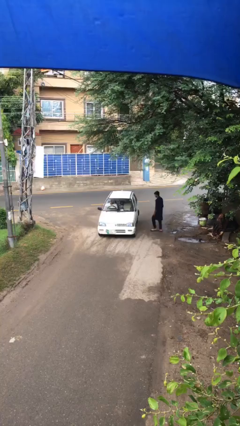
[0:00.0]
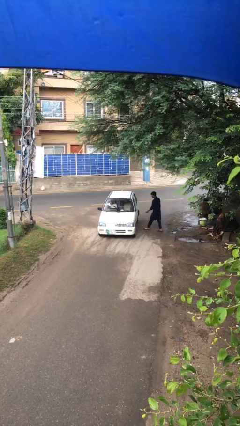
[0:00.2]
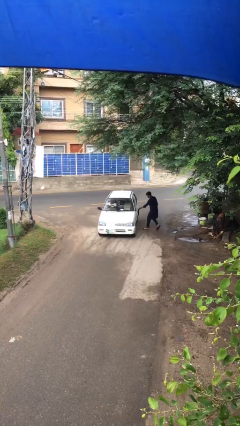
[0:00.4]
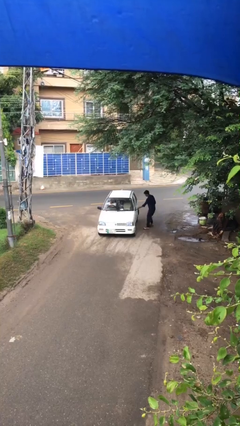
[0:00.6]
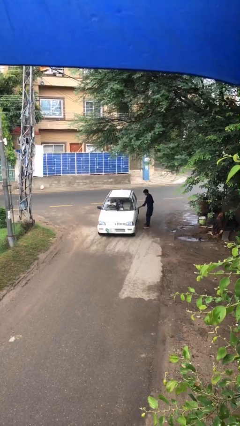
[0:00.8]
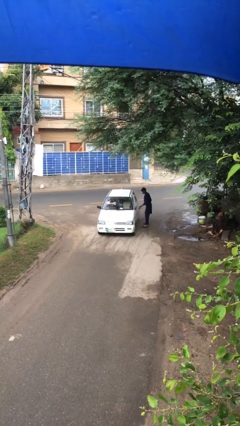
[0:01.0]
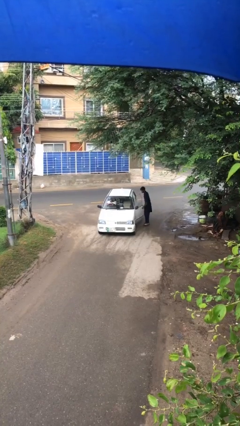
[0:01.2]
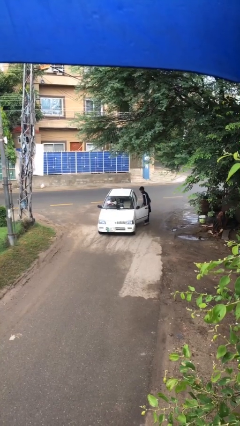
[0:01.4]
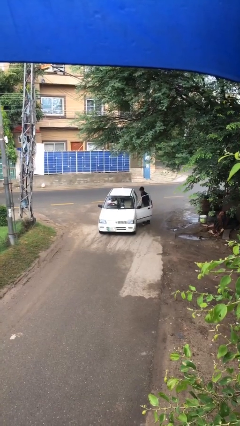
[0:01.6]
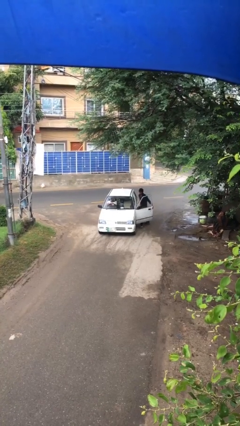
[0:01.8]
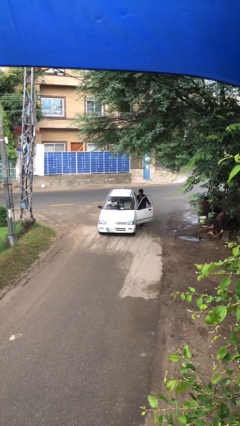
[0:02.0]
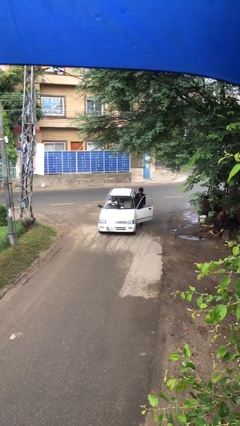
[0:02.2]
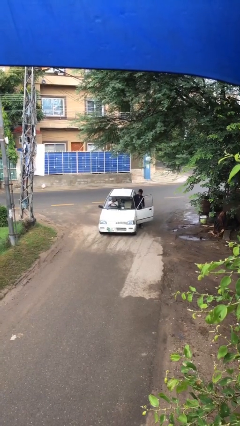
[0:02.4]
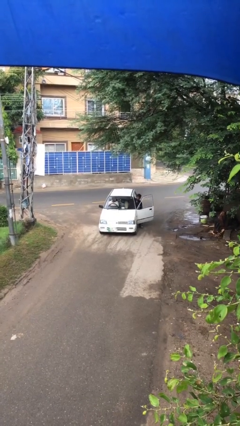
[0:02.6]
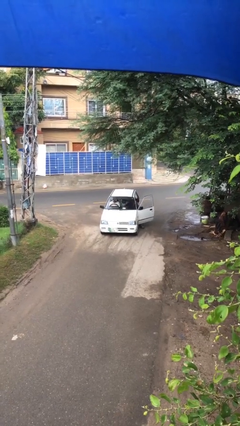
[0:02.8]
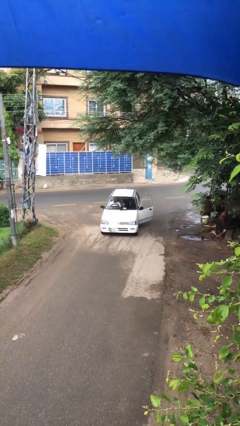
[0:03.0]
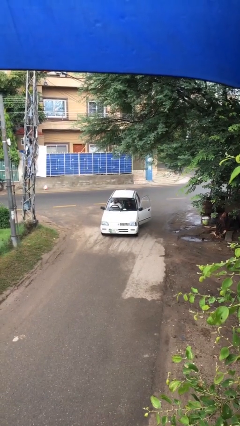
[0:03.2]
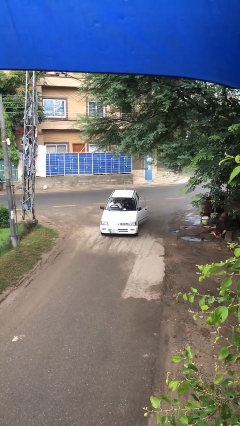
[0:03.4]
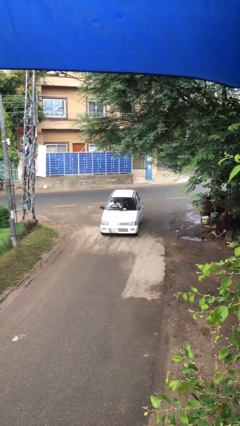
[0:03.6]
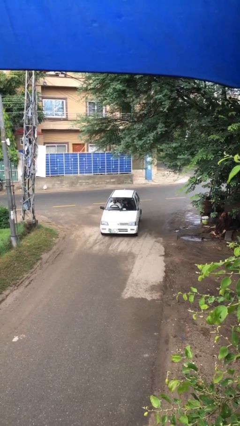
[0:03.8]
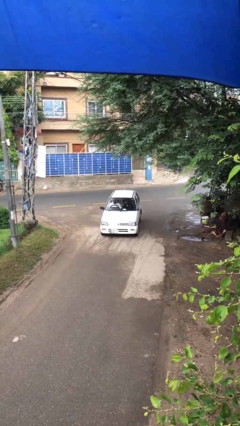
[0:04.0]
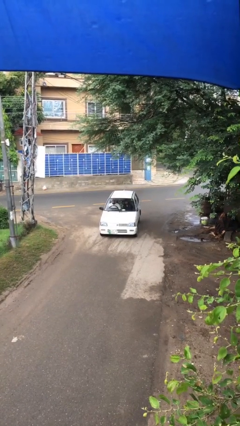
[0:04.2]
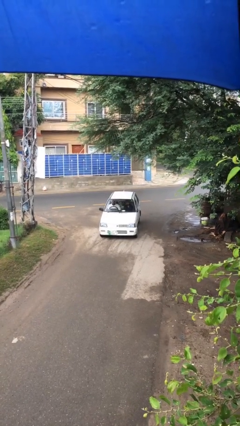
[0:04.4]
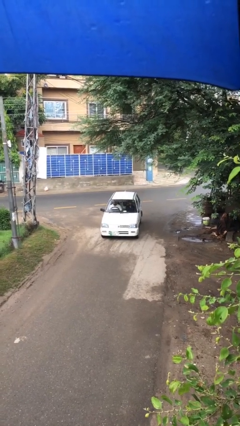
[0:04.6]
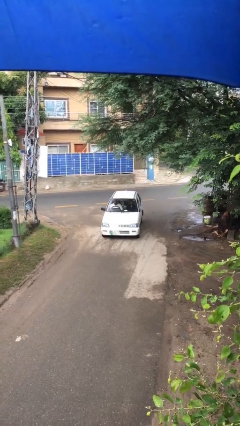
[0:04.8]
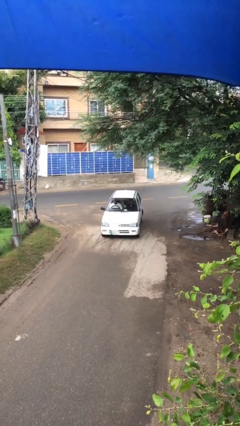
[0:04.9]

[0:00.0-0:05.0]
car picks up person

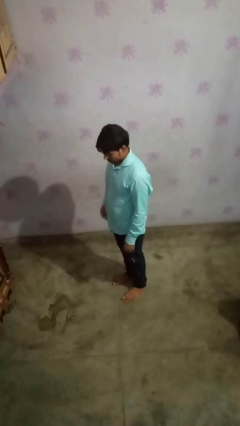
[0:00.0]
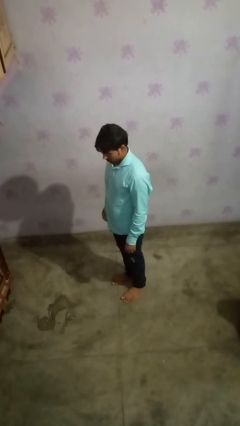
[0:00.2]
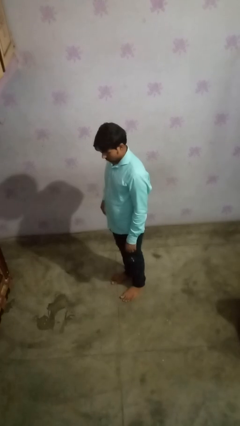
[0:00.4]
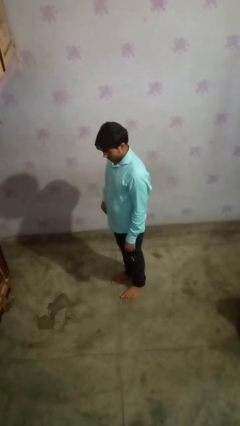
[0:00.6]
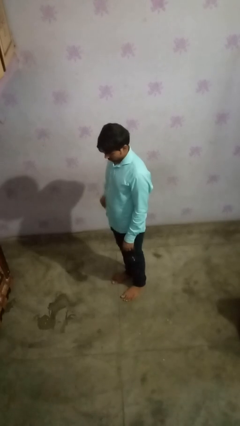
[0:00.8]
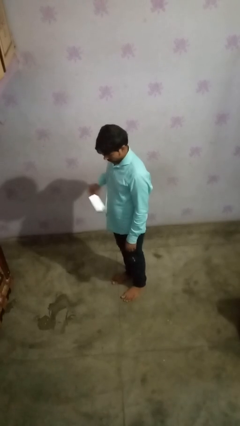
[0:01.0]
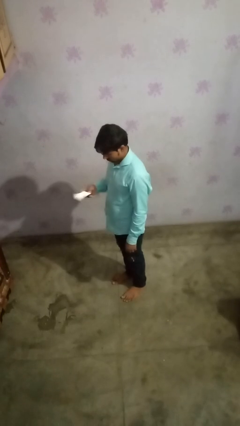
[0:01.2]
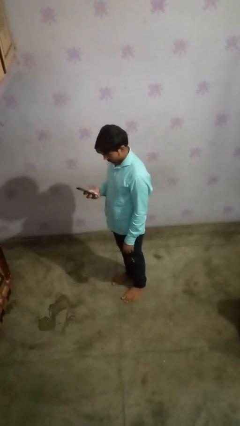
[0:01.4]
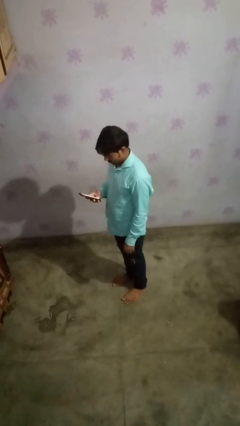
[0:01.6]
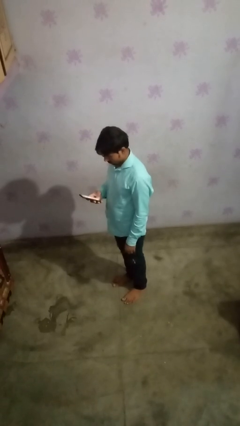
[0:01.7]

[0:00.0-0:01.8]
person takes phone from pocket

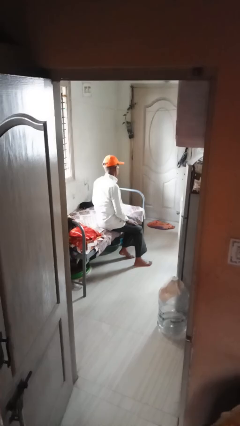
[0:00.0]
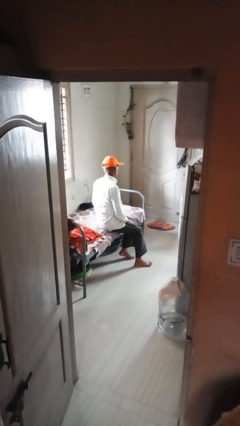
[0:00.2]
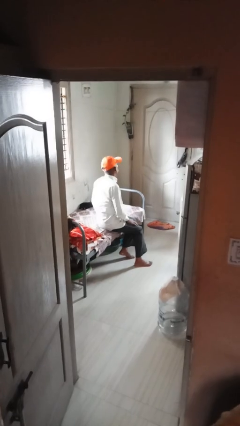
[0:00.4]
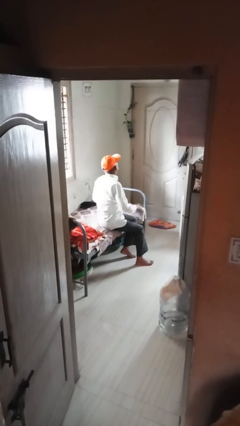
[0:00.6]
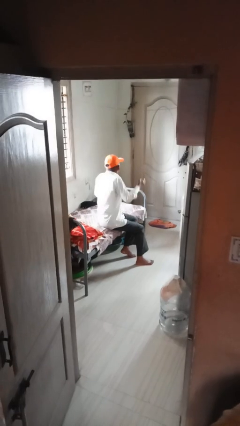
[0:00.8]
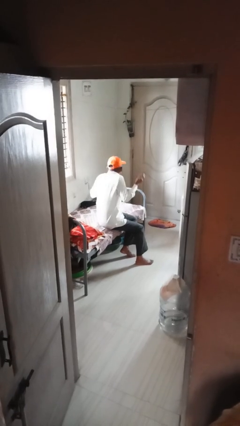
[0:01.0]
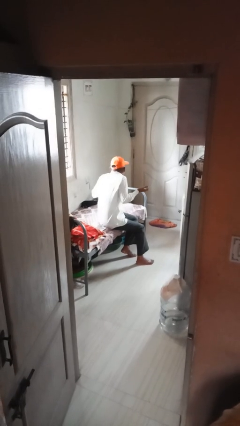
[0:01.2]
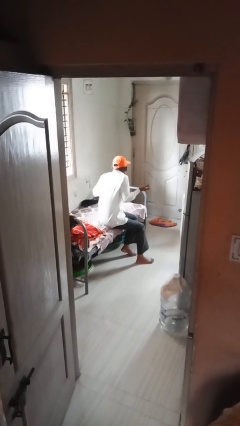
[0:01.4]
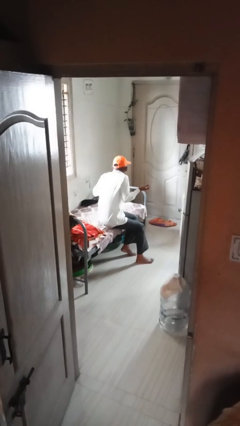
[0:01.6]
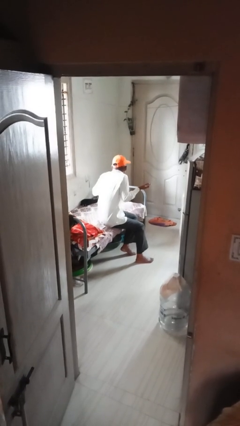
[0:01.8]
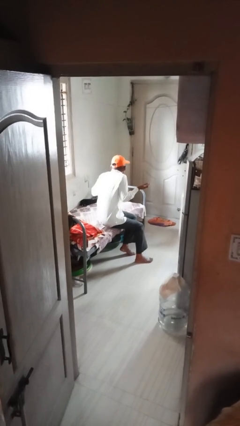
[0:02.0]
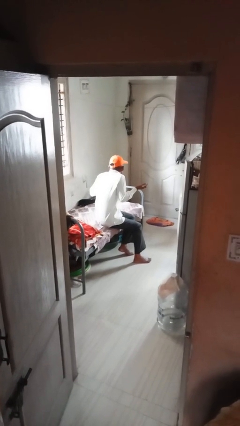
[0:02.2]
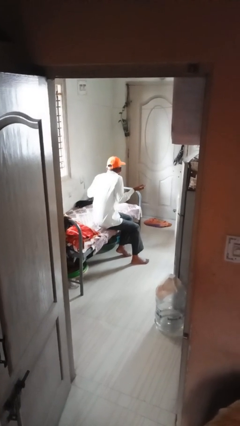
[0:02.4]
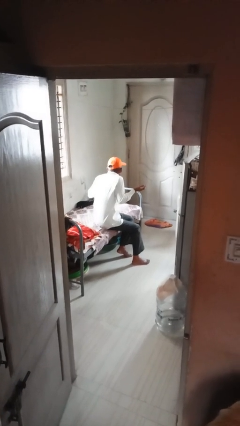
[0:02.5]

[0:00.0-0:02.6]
person shrugs

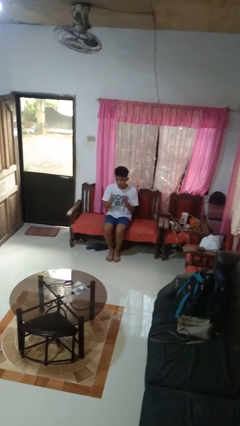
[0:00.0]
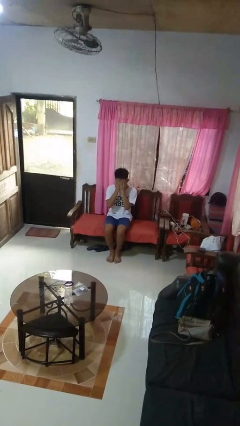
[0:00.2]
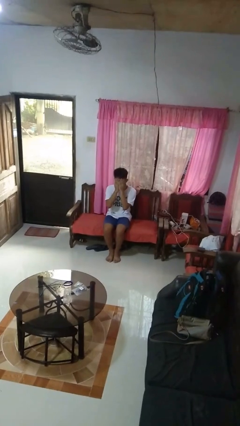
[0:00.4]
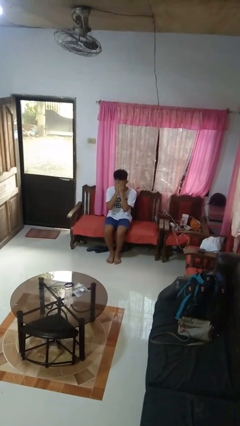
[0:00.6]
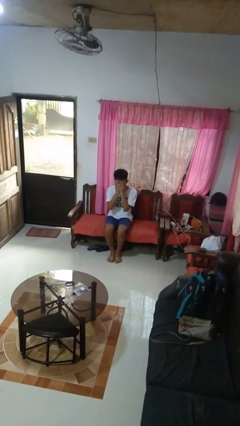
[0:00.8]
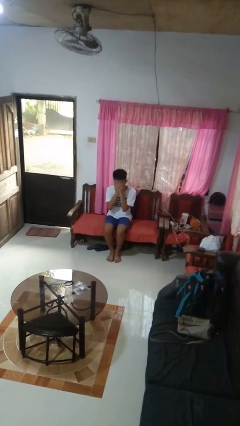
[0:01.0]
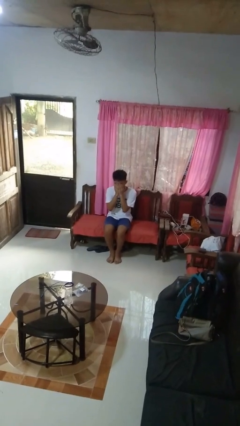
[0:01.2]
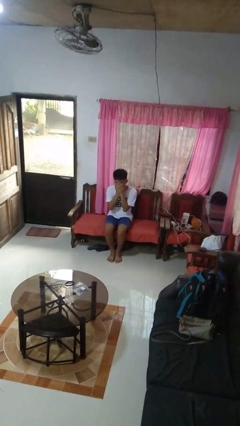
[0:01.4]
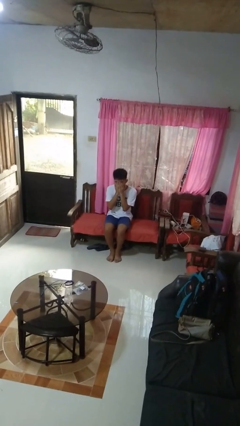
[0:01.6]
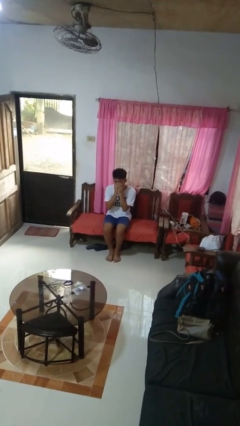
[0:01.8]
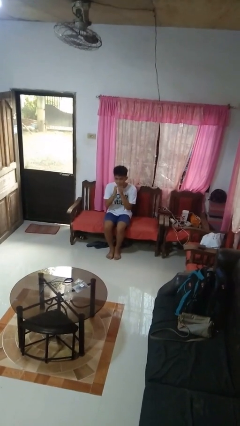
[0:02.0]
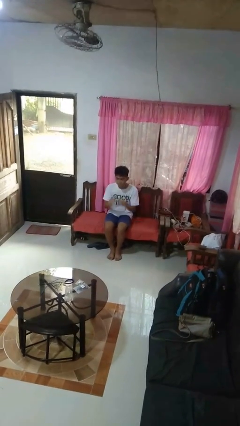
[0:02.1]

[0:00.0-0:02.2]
person covers face with hands

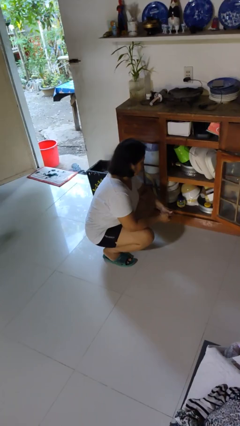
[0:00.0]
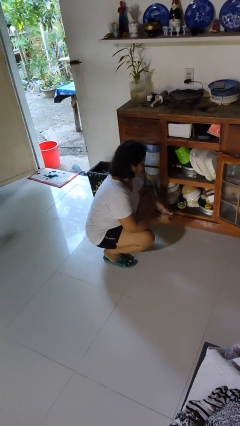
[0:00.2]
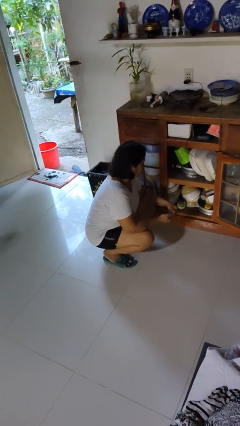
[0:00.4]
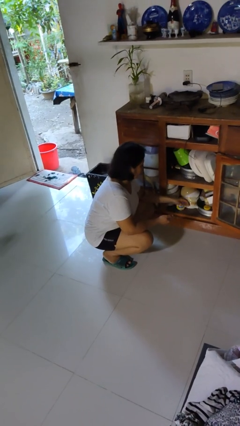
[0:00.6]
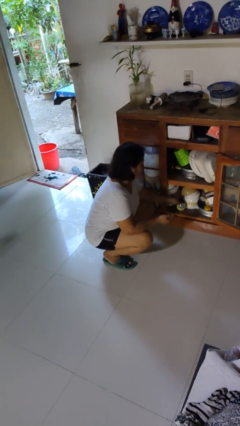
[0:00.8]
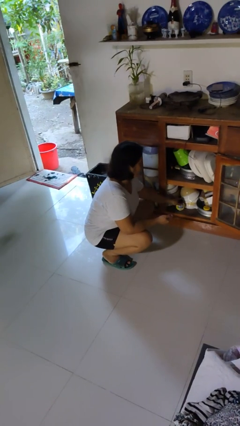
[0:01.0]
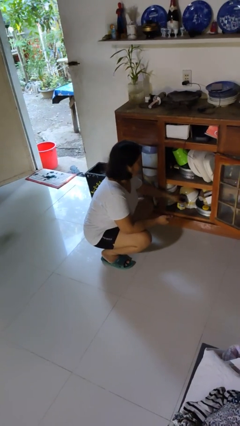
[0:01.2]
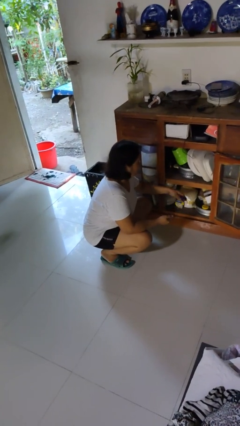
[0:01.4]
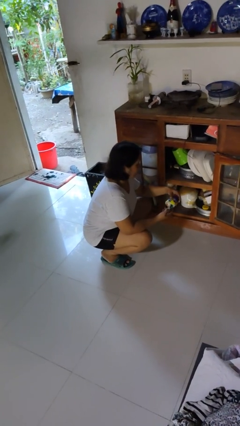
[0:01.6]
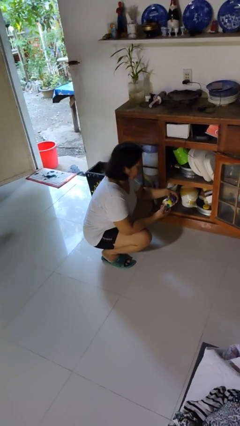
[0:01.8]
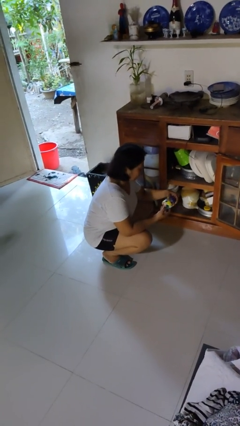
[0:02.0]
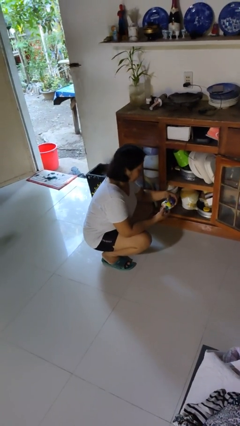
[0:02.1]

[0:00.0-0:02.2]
person picks up object from cabinet

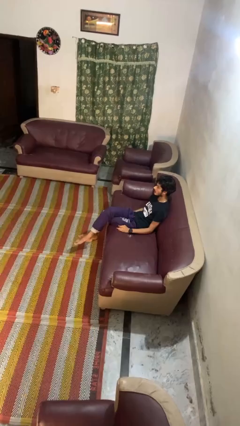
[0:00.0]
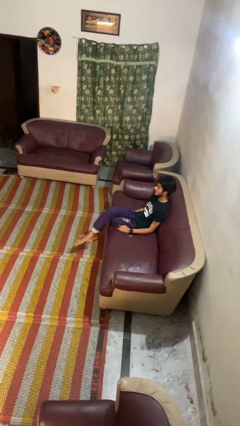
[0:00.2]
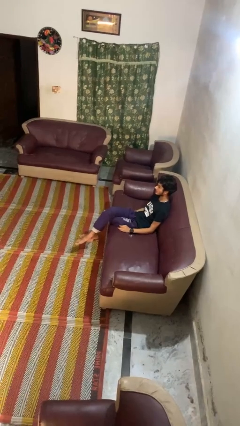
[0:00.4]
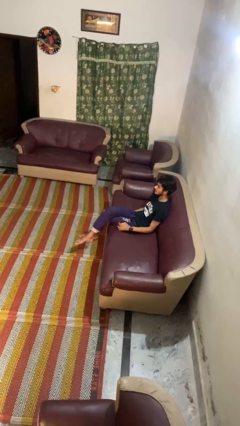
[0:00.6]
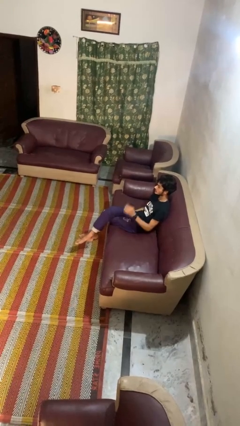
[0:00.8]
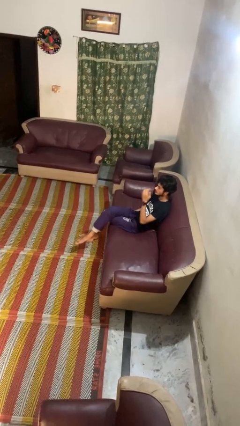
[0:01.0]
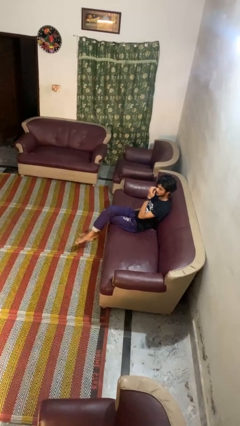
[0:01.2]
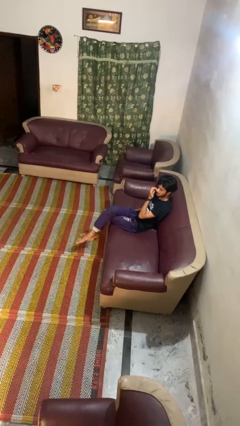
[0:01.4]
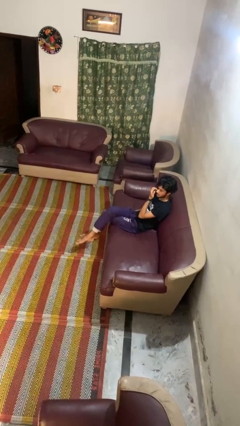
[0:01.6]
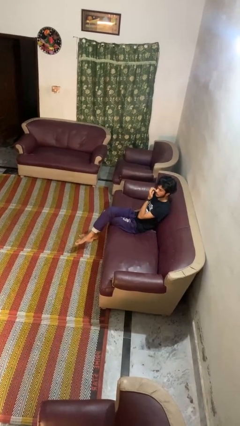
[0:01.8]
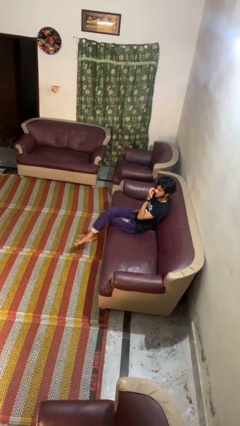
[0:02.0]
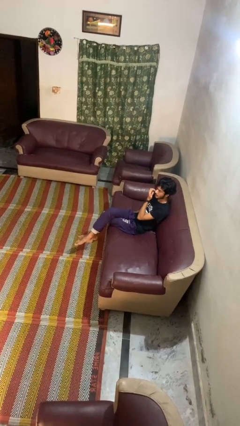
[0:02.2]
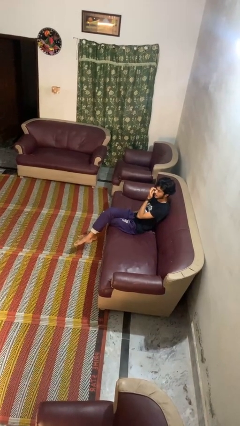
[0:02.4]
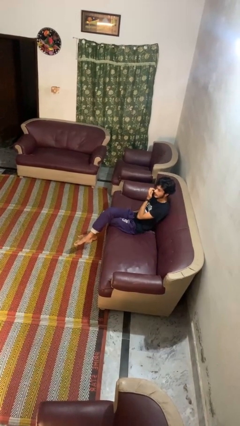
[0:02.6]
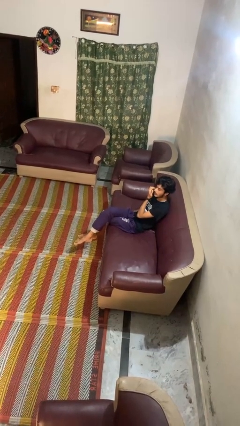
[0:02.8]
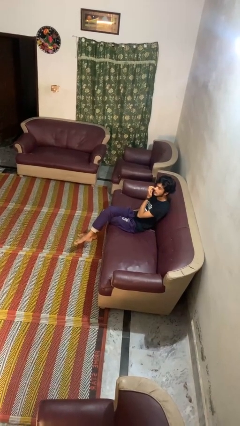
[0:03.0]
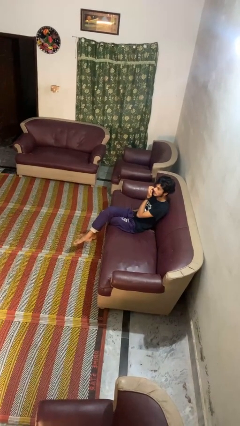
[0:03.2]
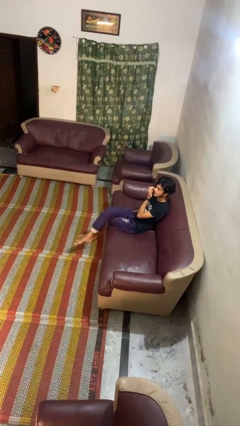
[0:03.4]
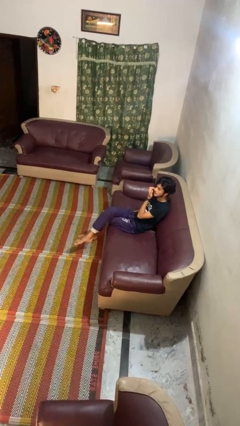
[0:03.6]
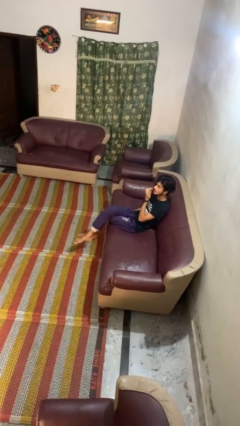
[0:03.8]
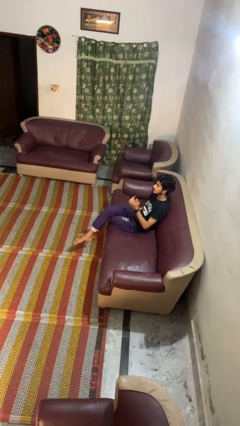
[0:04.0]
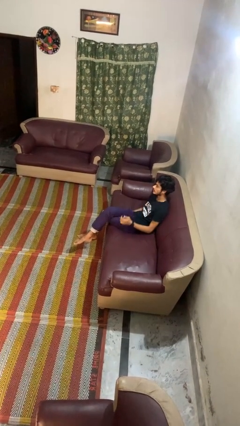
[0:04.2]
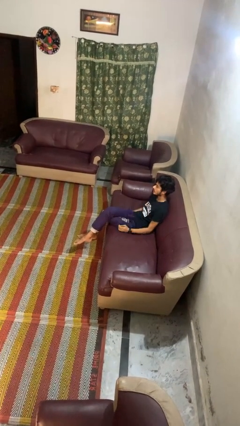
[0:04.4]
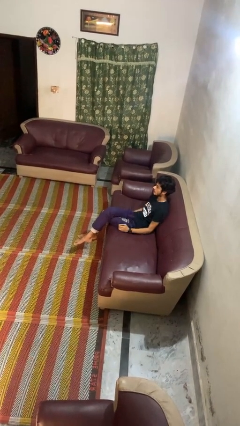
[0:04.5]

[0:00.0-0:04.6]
person scratches face
